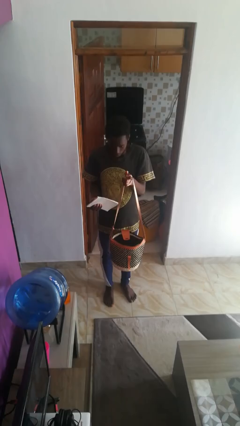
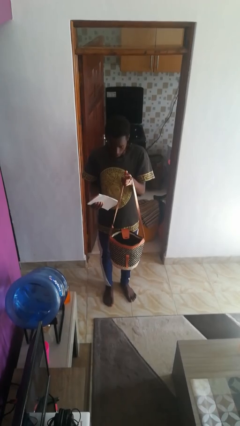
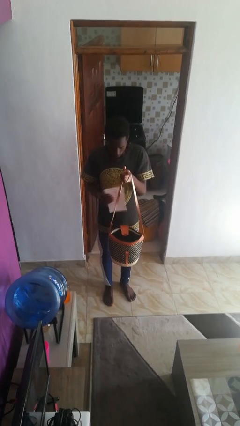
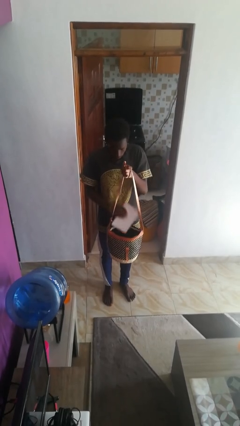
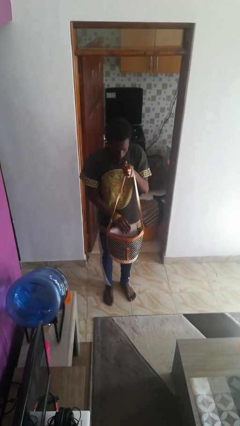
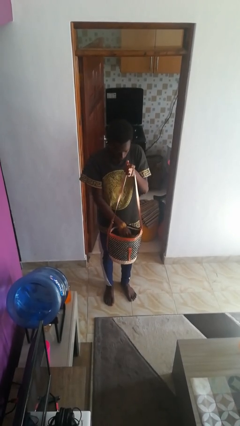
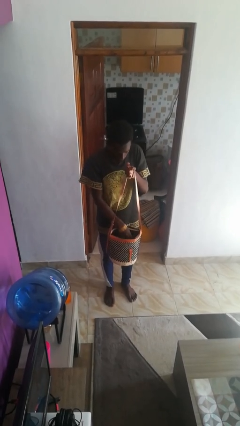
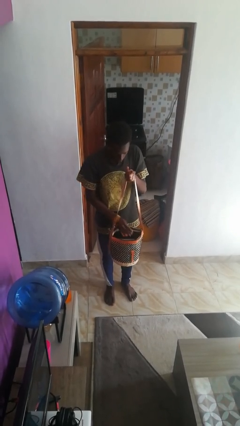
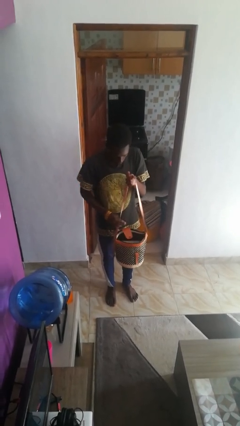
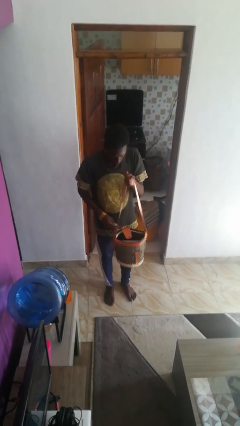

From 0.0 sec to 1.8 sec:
person puts object into purse

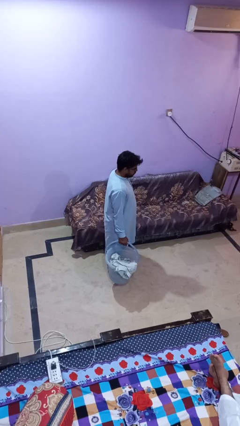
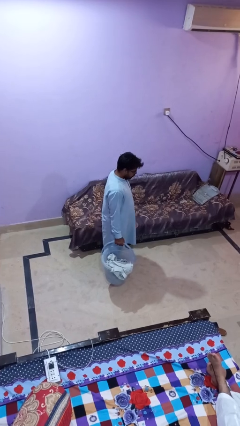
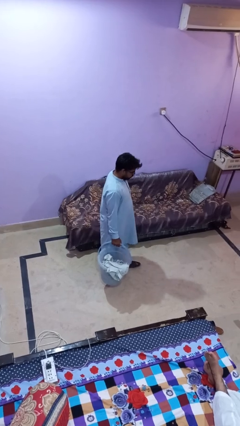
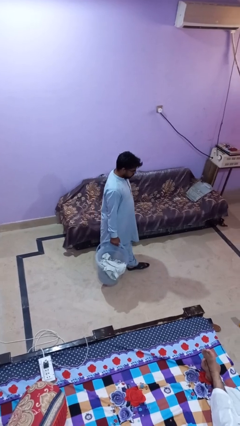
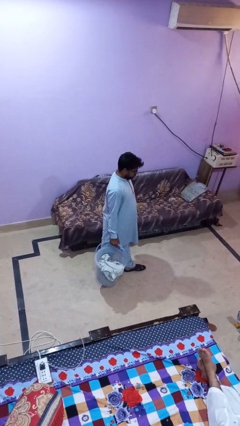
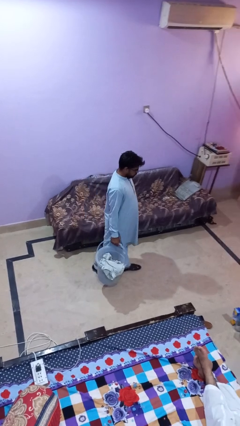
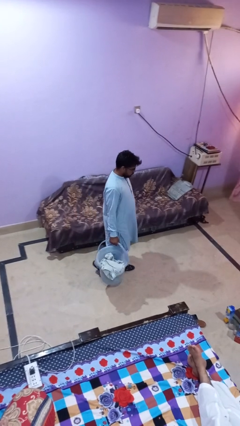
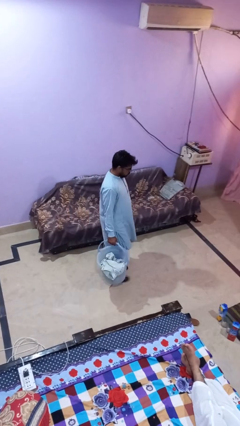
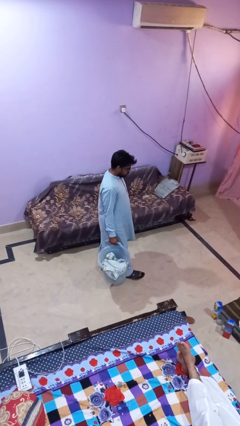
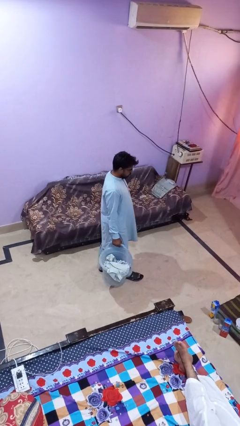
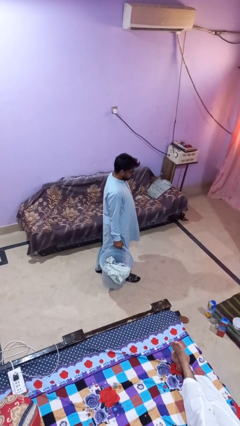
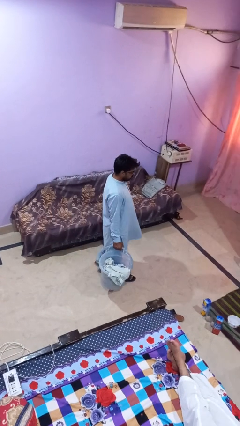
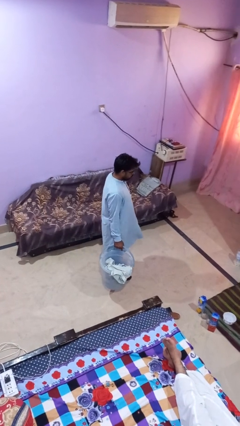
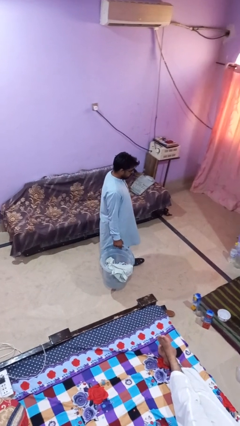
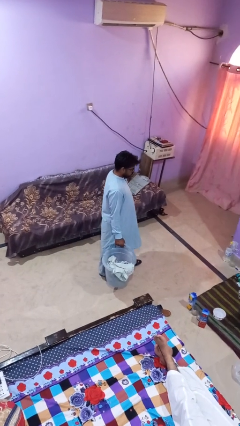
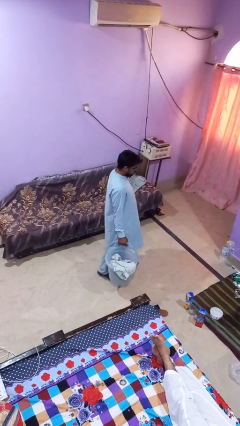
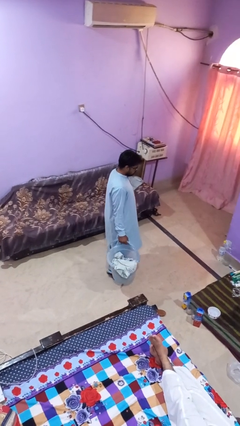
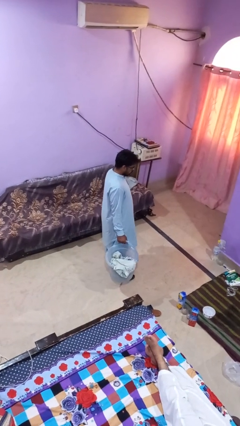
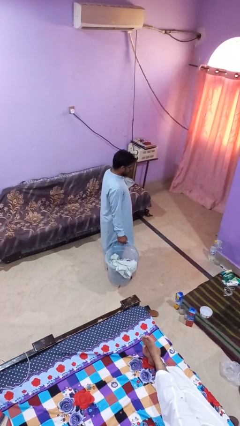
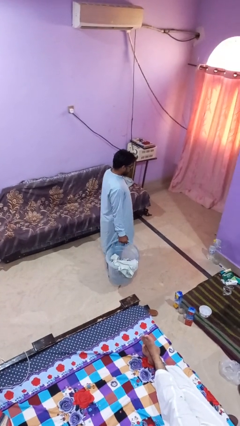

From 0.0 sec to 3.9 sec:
person carries laundry basket

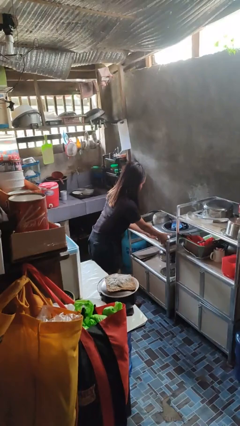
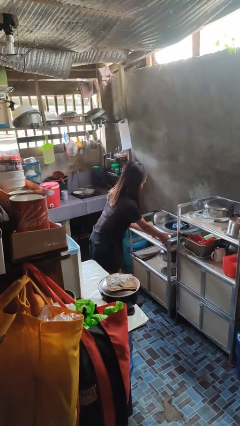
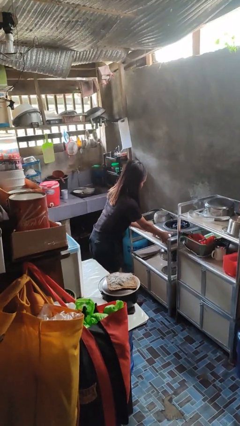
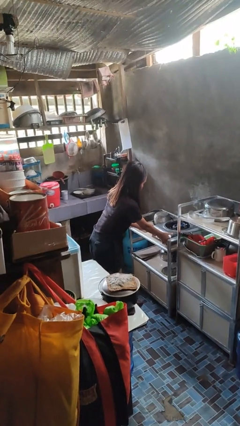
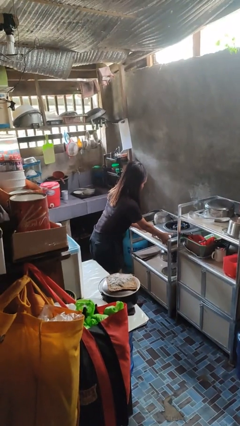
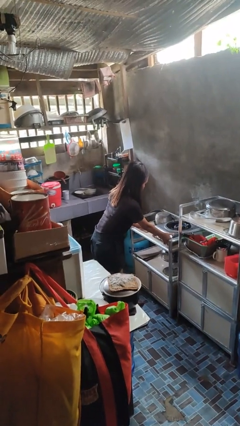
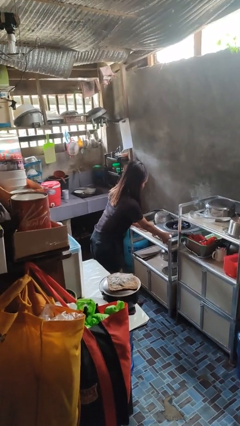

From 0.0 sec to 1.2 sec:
person turns off stovetop

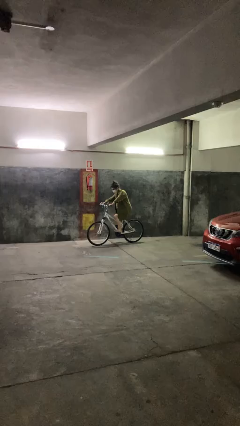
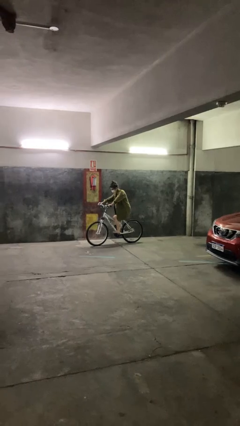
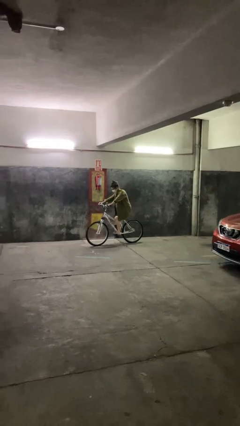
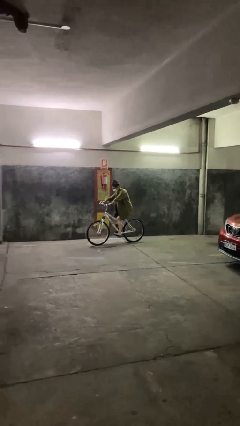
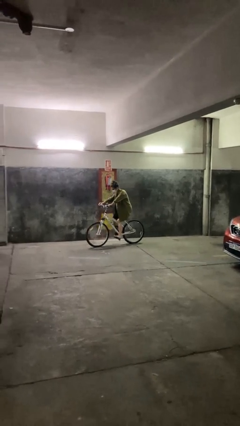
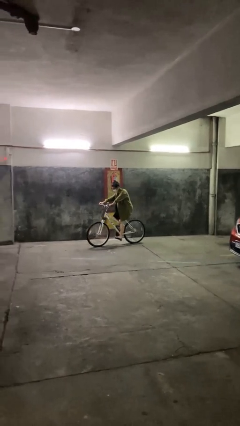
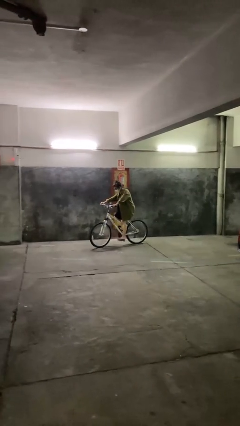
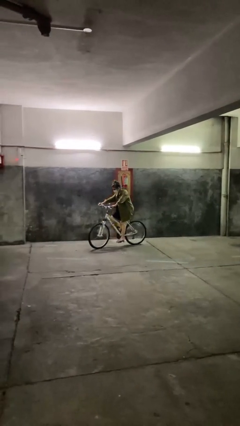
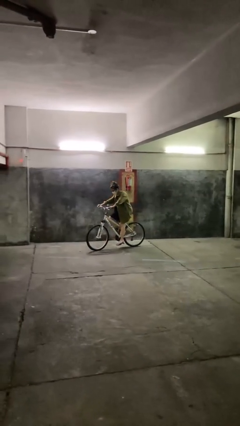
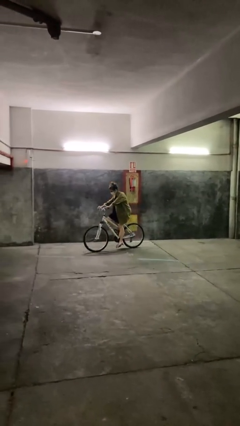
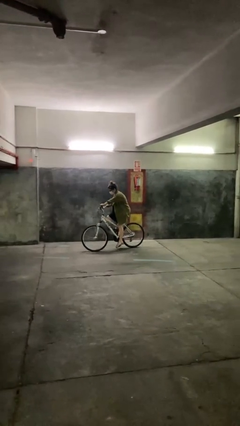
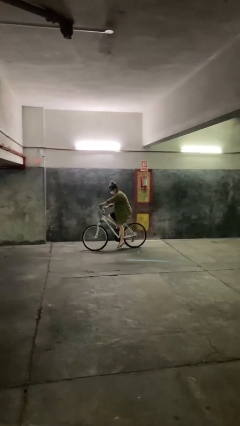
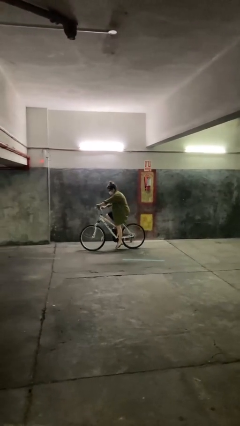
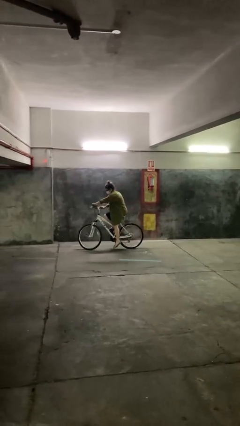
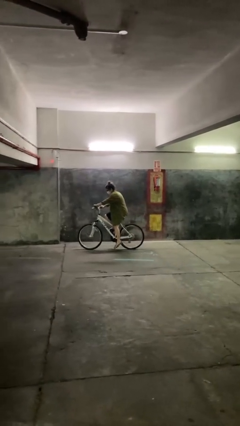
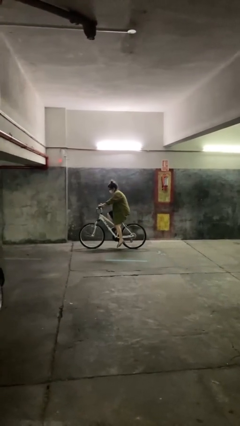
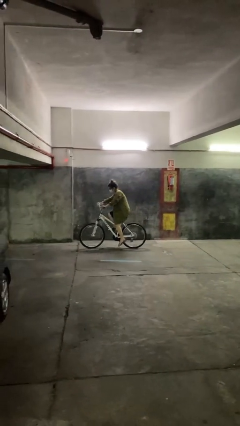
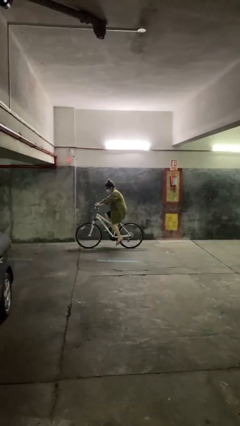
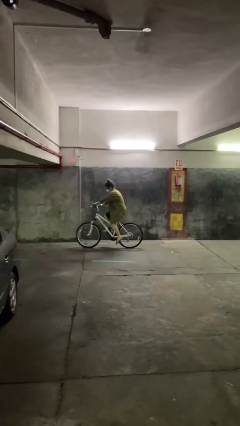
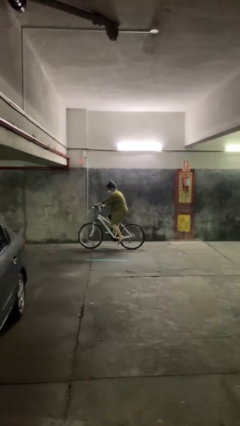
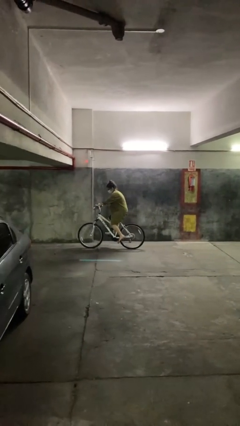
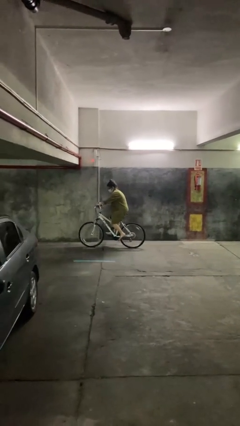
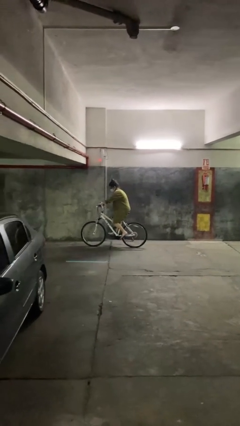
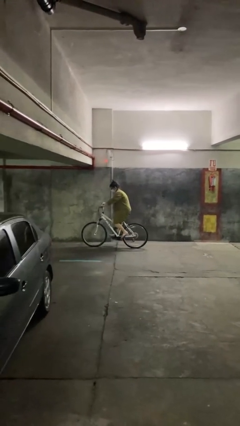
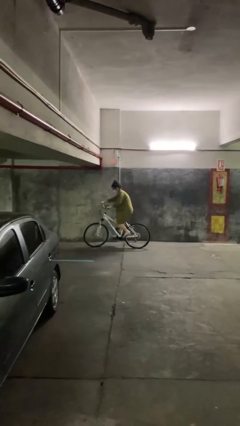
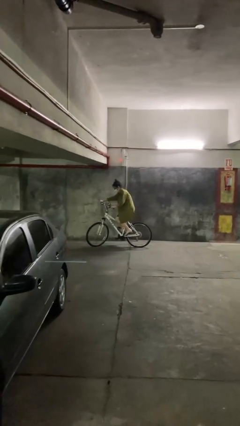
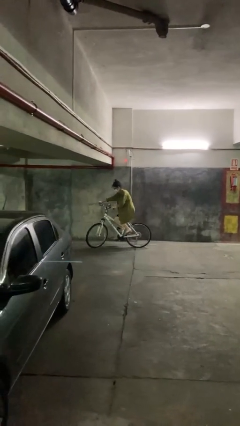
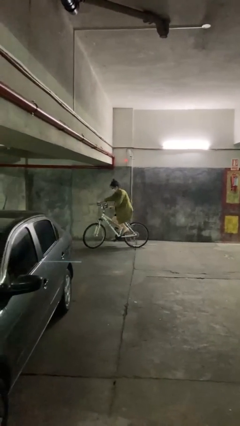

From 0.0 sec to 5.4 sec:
person rides bicycle

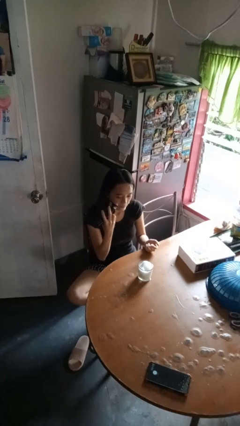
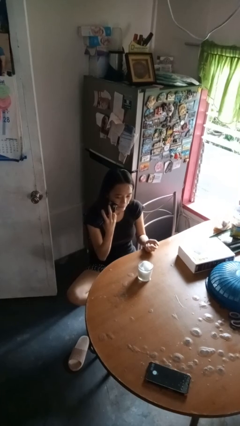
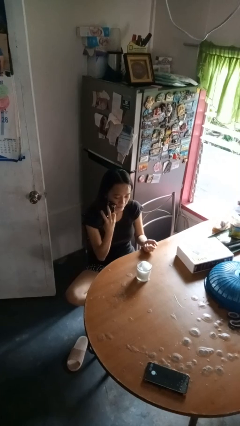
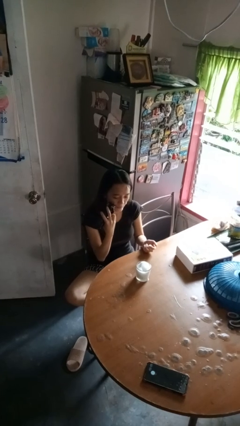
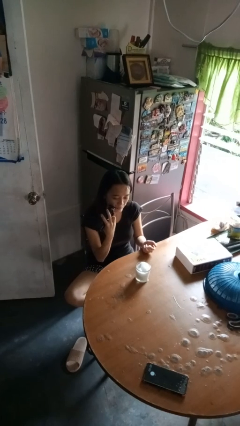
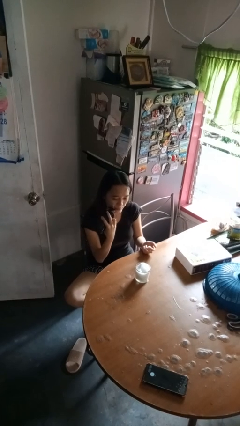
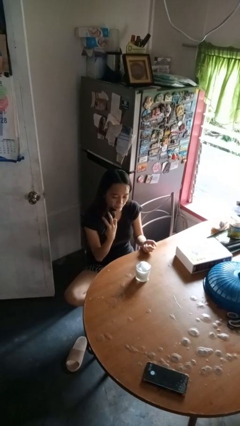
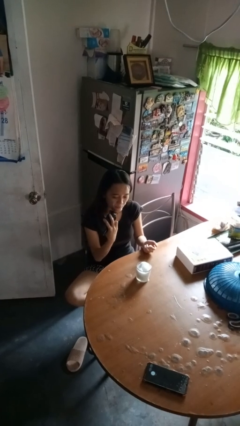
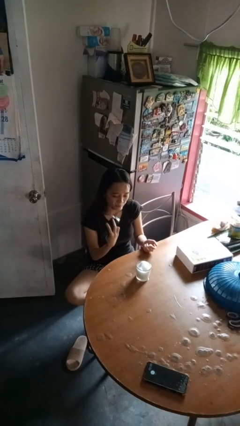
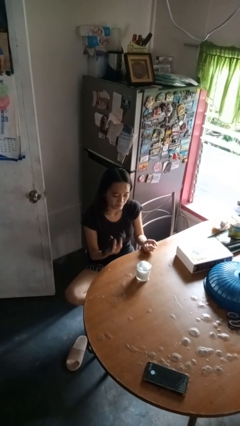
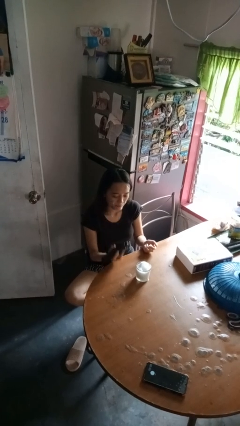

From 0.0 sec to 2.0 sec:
person shaves face

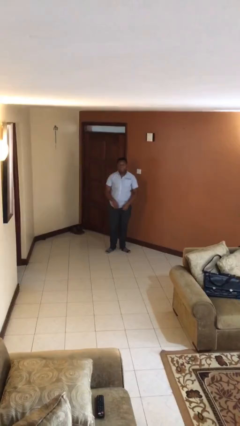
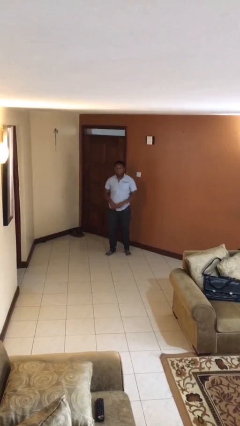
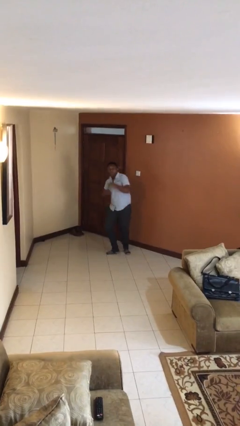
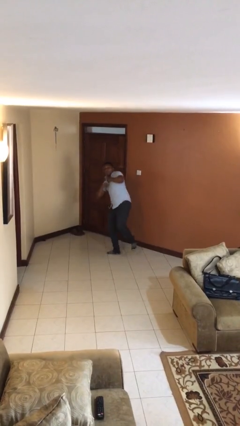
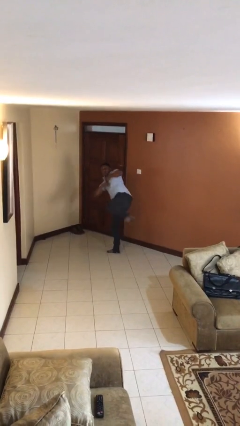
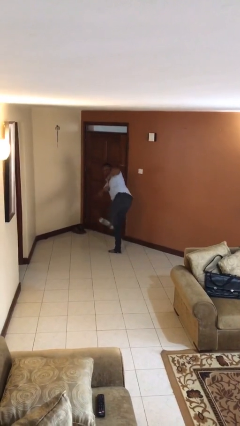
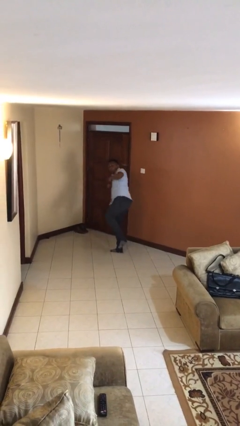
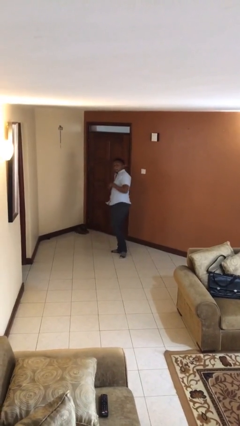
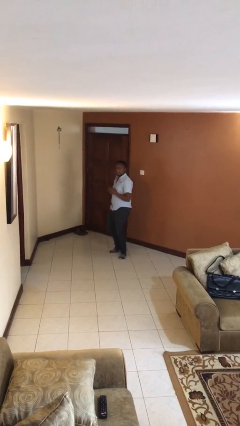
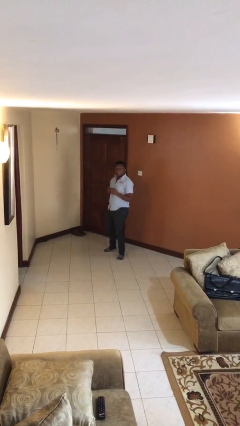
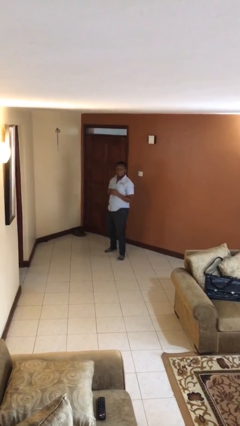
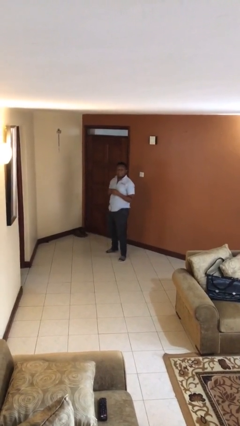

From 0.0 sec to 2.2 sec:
person karate kicks

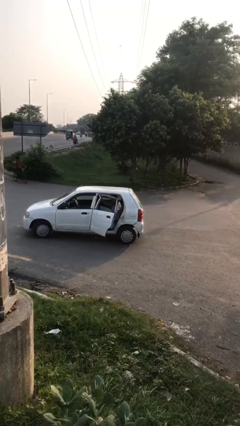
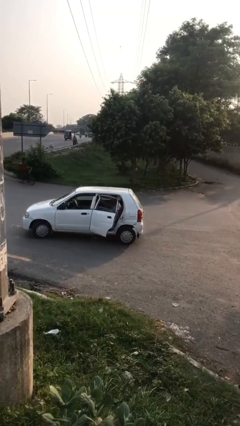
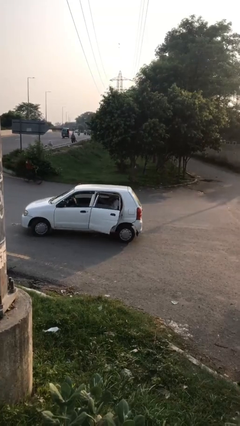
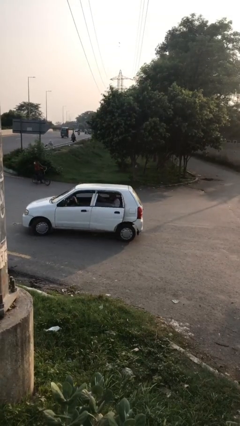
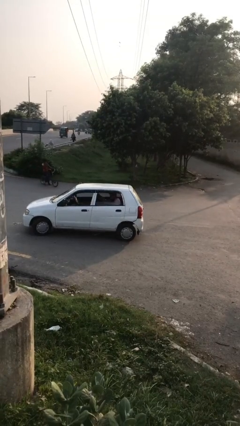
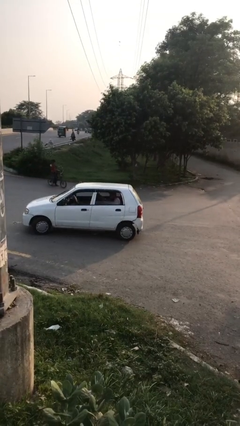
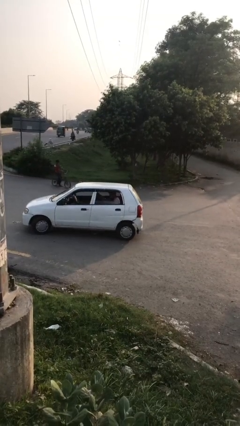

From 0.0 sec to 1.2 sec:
person closes car door
